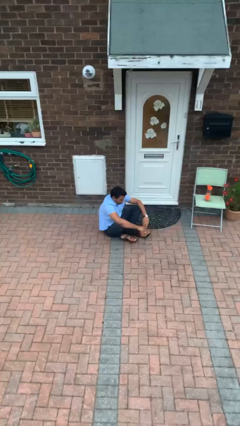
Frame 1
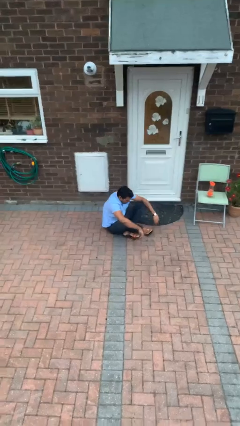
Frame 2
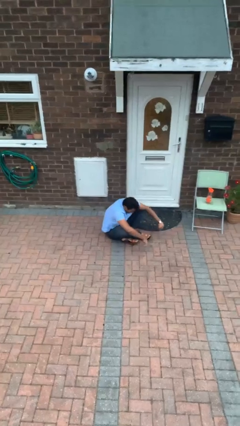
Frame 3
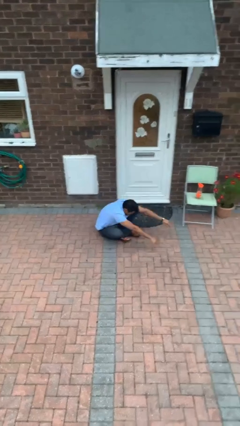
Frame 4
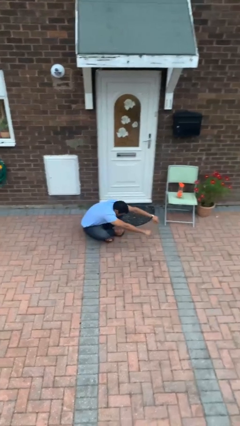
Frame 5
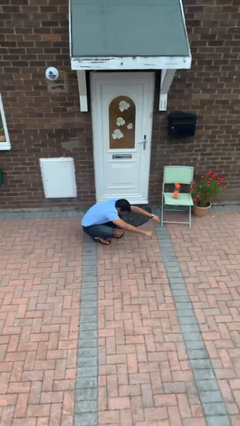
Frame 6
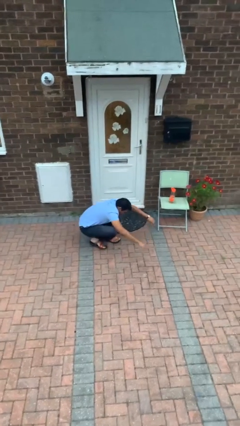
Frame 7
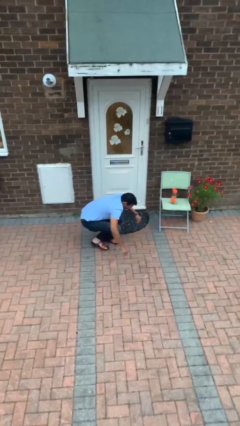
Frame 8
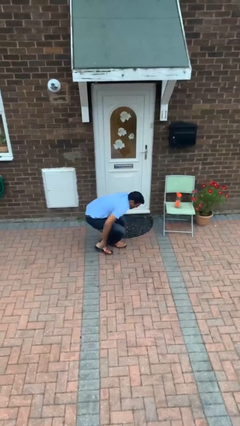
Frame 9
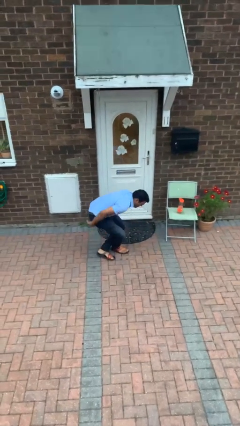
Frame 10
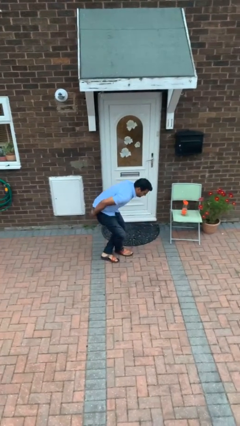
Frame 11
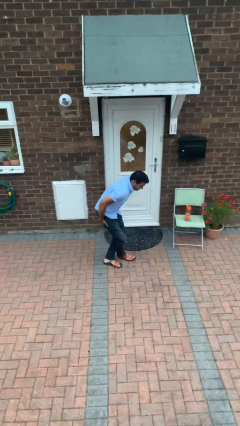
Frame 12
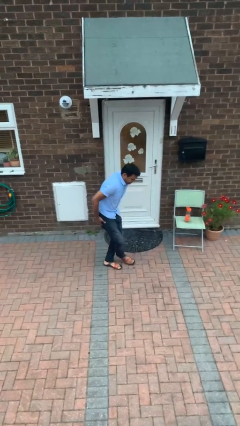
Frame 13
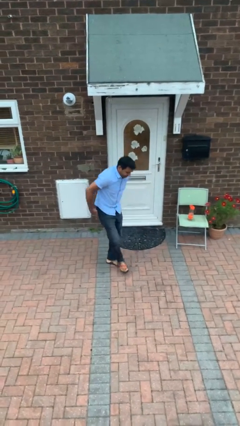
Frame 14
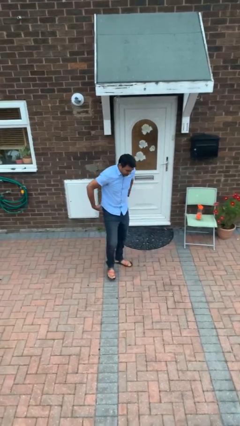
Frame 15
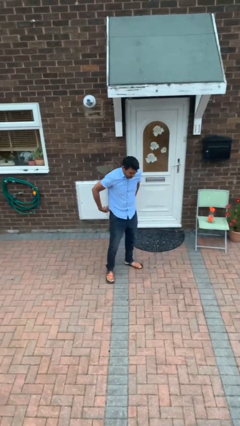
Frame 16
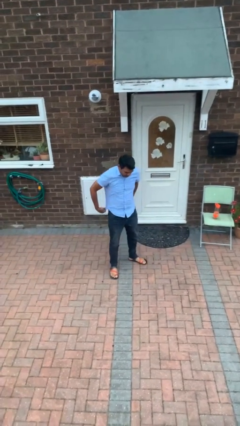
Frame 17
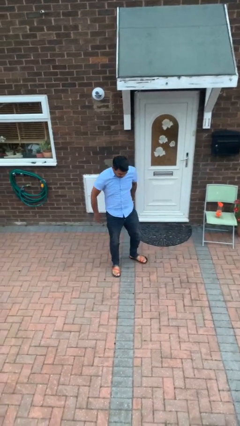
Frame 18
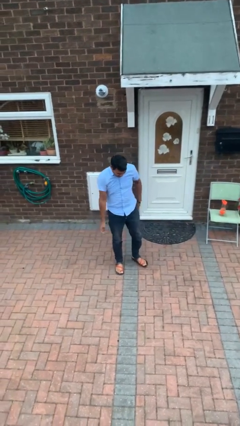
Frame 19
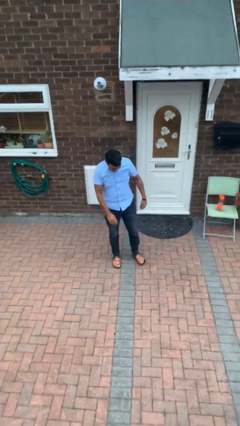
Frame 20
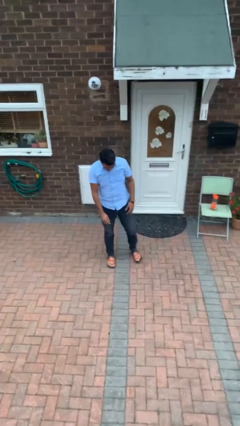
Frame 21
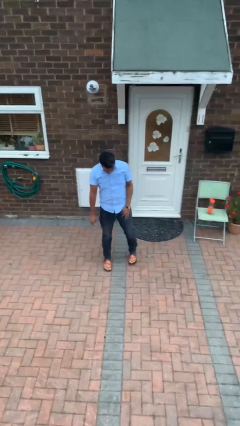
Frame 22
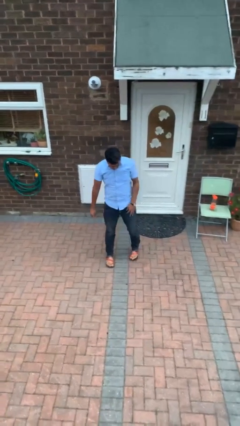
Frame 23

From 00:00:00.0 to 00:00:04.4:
person stands up from floor

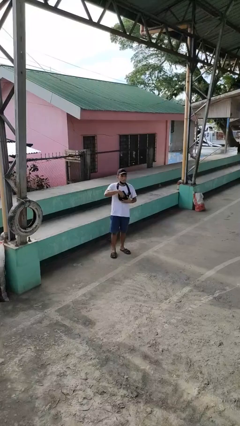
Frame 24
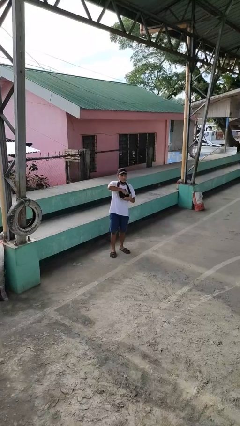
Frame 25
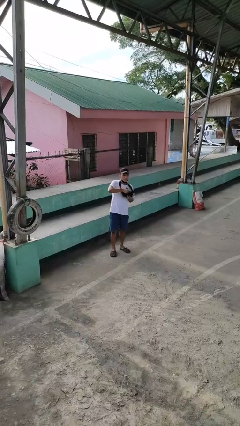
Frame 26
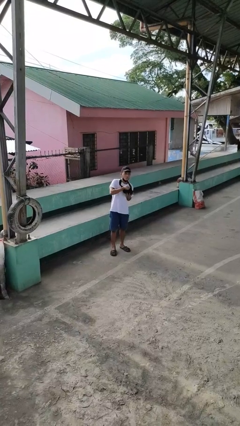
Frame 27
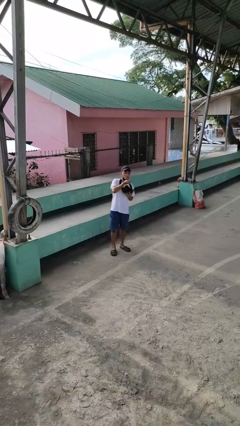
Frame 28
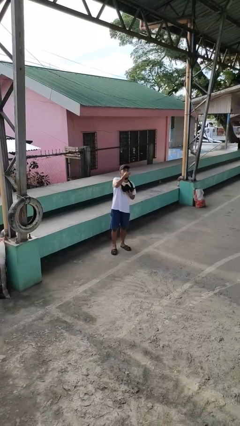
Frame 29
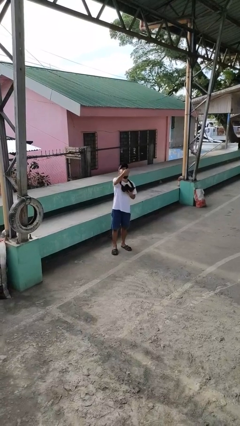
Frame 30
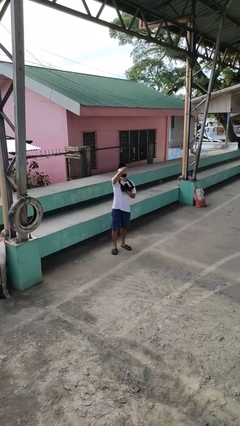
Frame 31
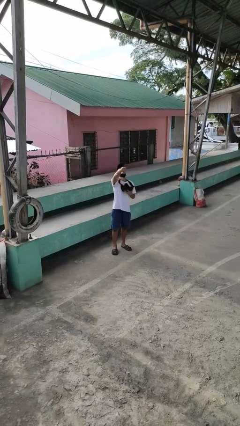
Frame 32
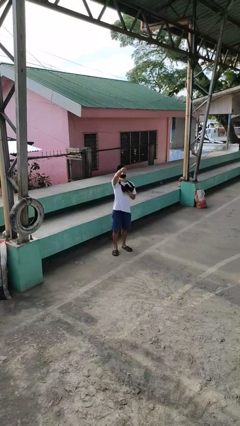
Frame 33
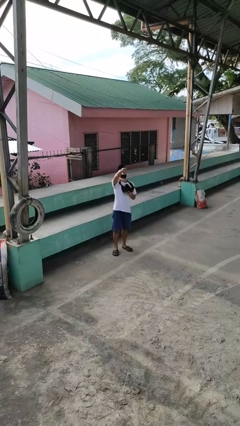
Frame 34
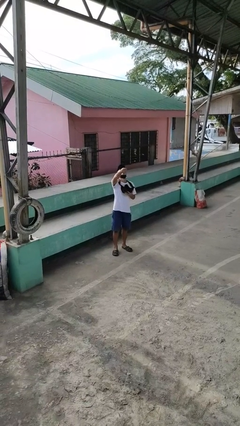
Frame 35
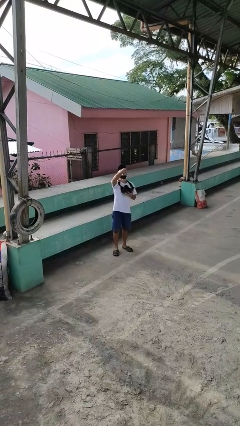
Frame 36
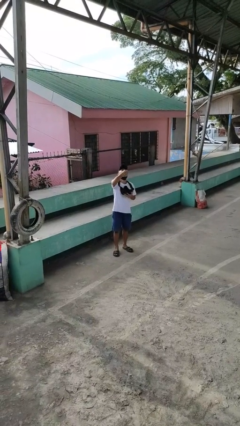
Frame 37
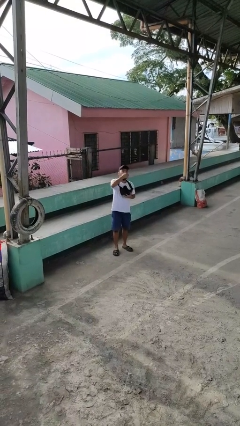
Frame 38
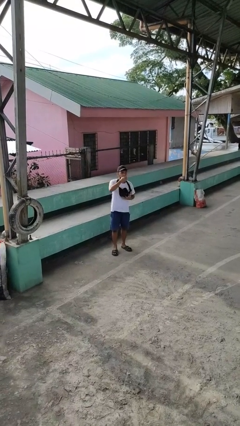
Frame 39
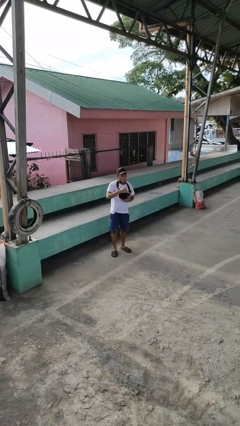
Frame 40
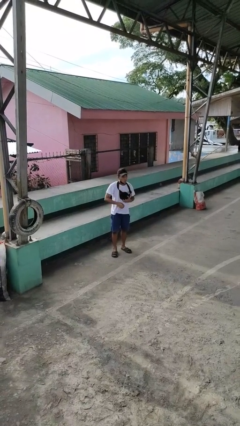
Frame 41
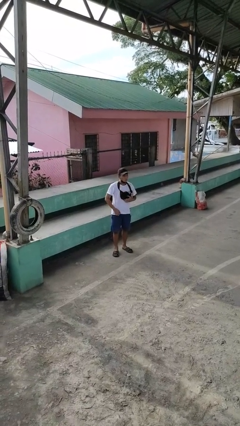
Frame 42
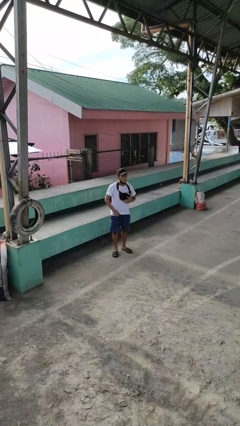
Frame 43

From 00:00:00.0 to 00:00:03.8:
person eats snack from bag

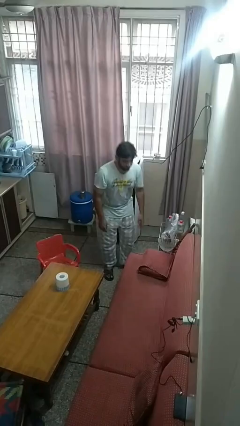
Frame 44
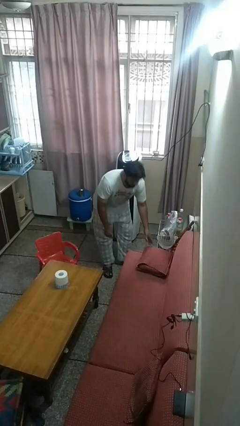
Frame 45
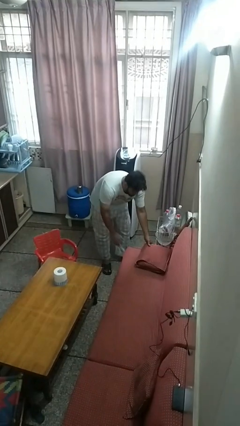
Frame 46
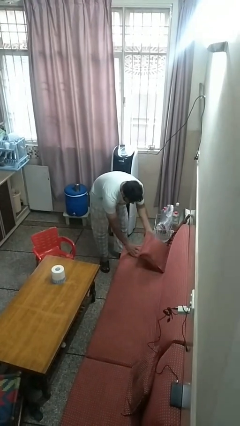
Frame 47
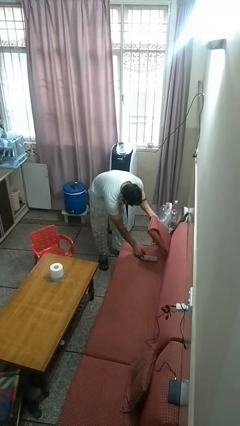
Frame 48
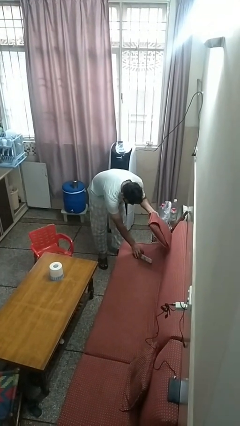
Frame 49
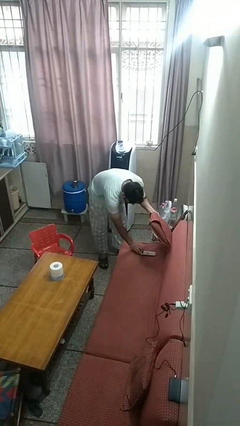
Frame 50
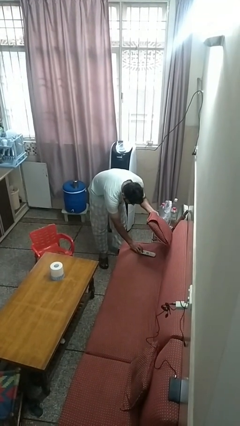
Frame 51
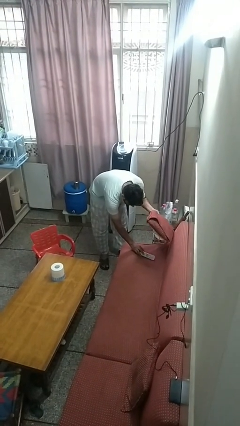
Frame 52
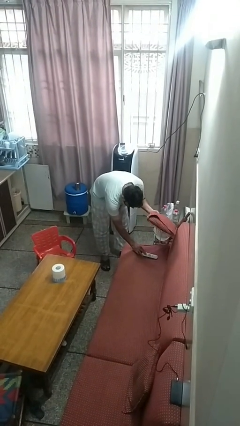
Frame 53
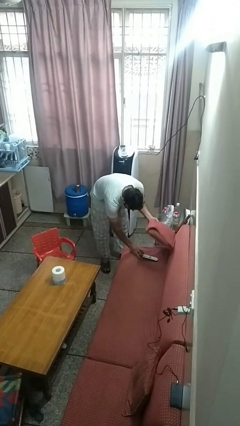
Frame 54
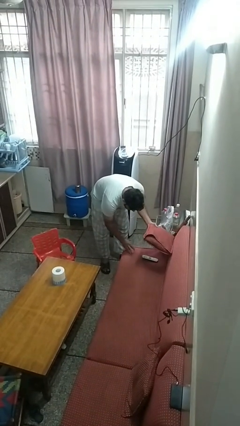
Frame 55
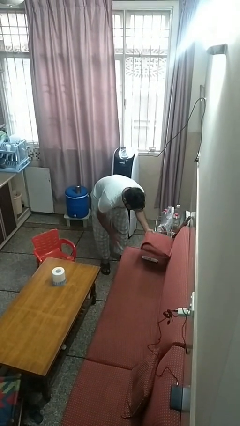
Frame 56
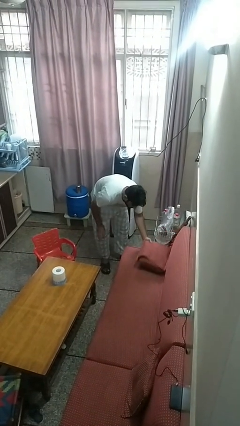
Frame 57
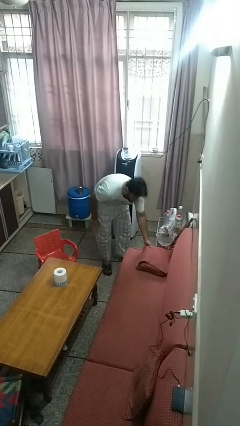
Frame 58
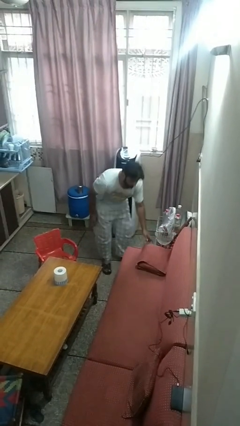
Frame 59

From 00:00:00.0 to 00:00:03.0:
person searches in couch

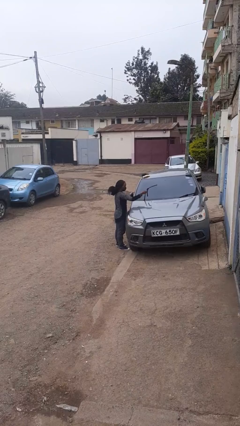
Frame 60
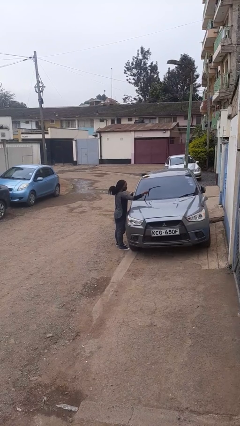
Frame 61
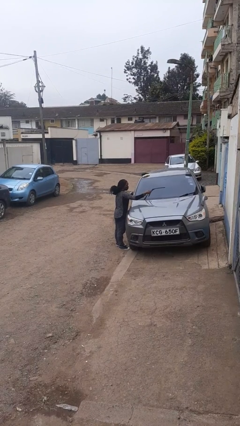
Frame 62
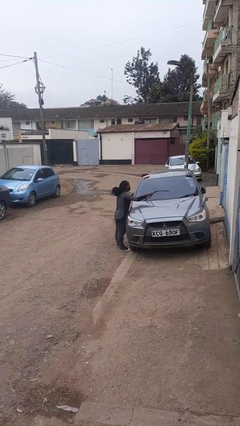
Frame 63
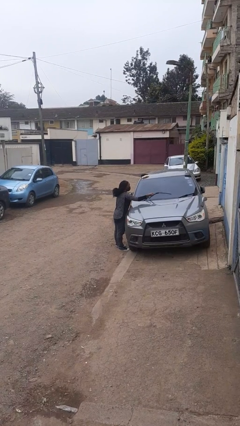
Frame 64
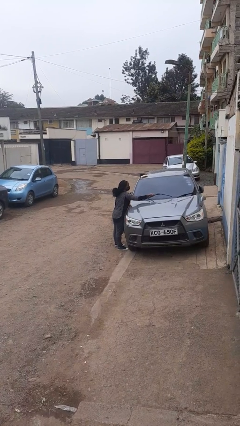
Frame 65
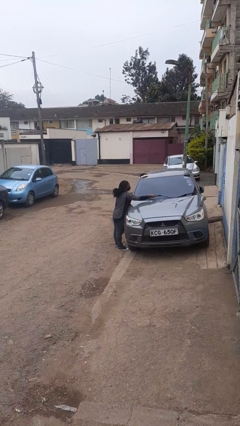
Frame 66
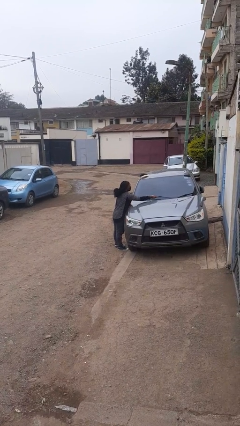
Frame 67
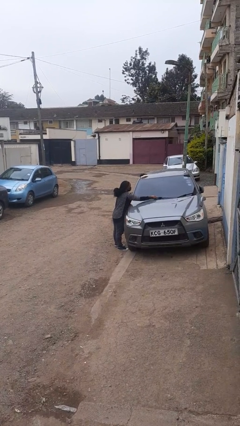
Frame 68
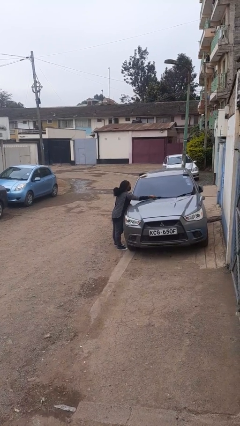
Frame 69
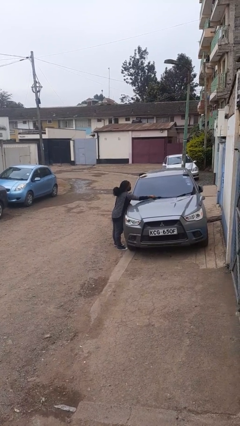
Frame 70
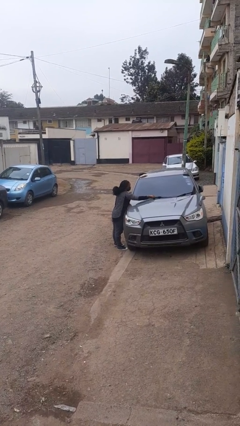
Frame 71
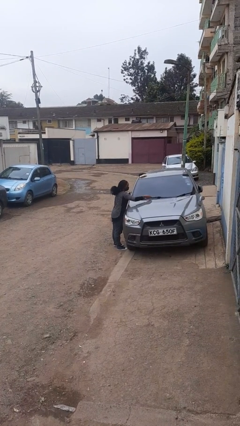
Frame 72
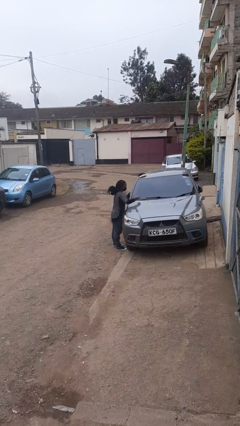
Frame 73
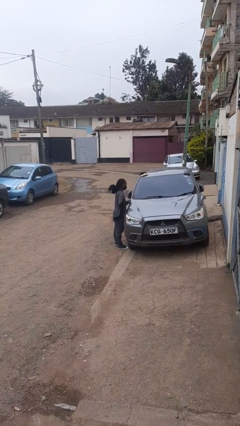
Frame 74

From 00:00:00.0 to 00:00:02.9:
person flips down car wipers

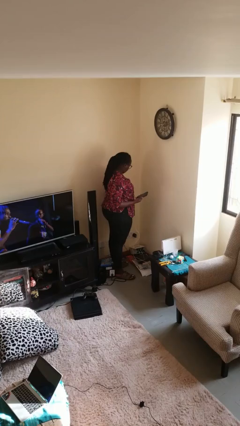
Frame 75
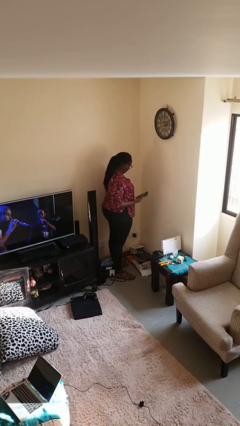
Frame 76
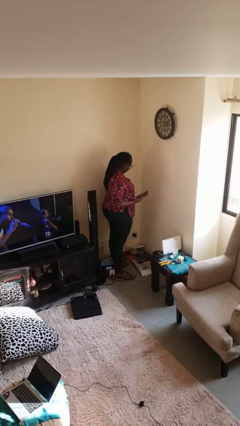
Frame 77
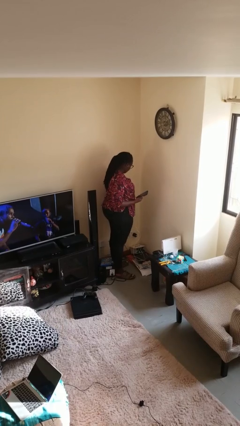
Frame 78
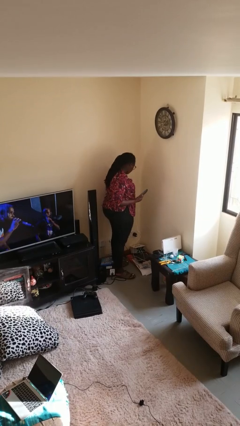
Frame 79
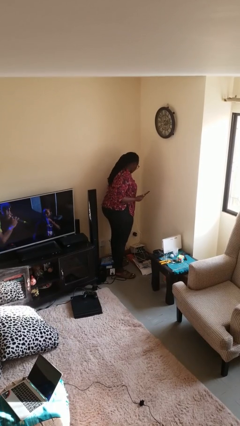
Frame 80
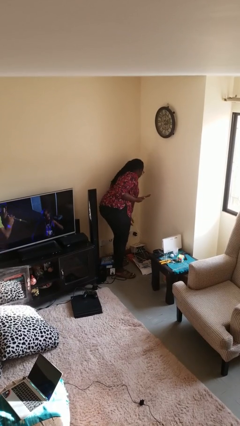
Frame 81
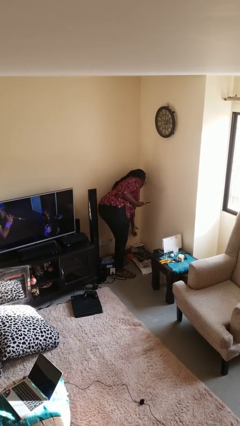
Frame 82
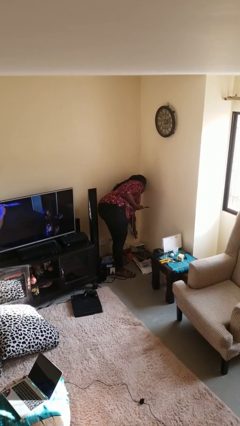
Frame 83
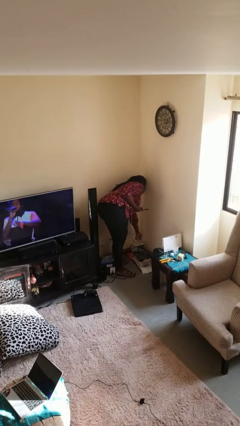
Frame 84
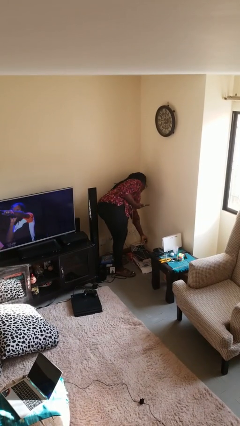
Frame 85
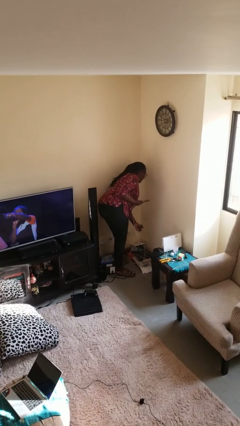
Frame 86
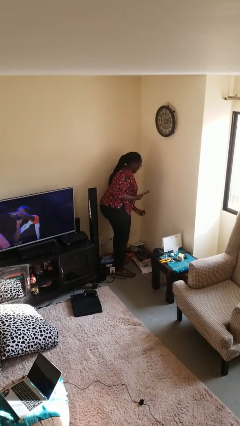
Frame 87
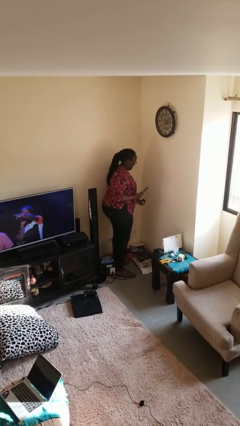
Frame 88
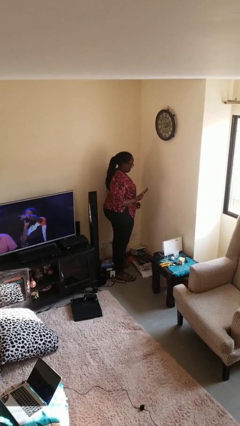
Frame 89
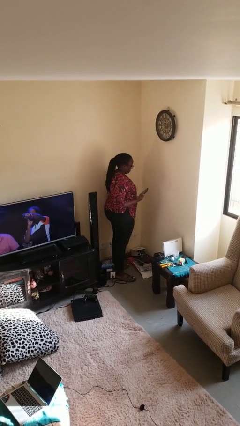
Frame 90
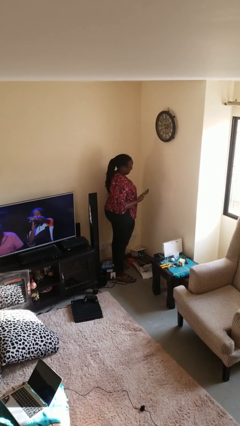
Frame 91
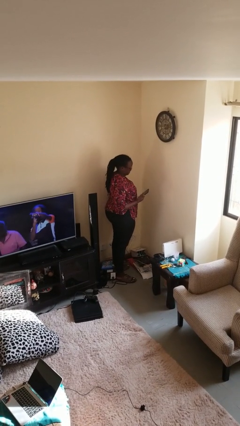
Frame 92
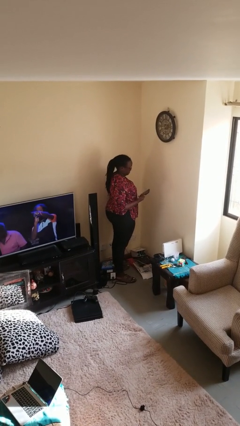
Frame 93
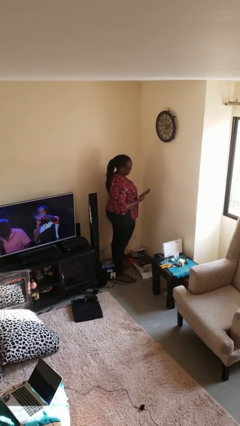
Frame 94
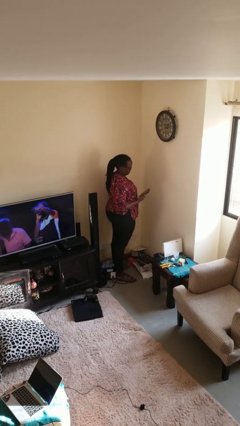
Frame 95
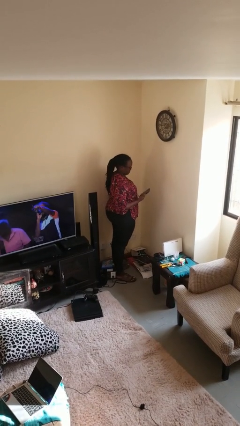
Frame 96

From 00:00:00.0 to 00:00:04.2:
person unplugs from electrical socket
